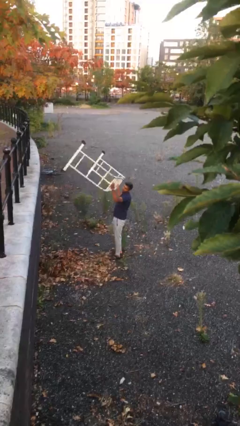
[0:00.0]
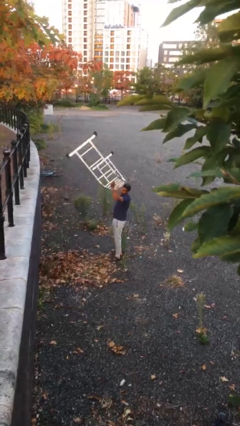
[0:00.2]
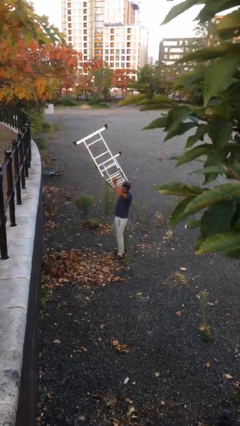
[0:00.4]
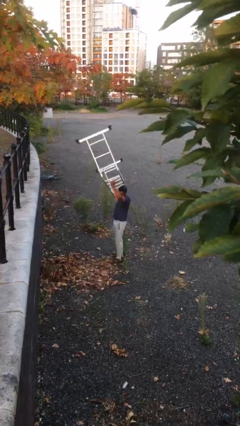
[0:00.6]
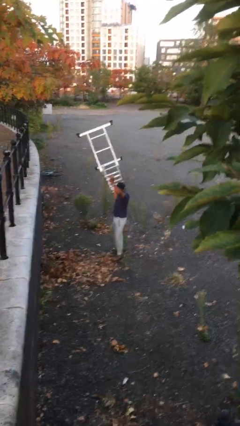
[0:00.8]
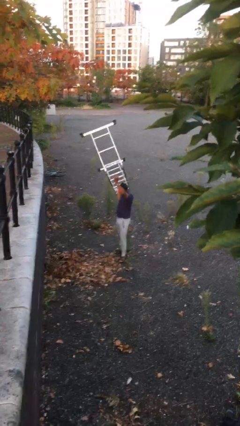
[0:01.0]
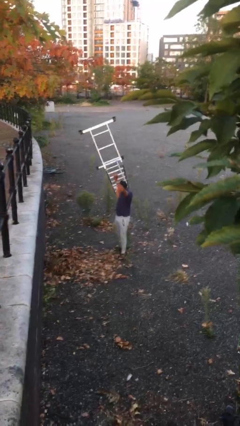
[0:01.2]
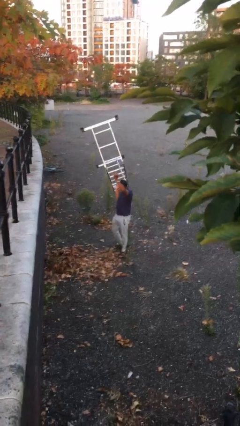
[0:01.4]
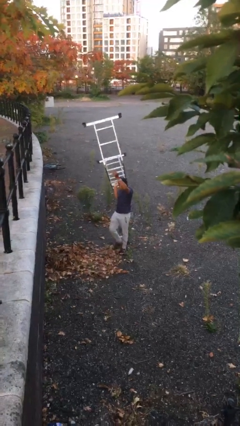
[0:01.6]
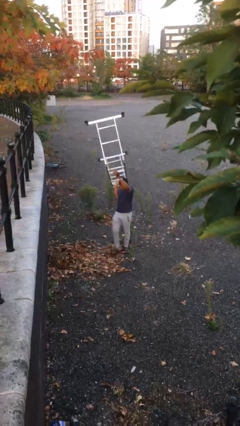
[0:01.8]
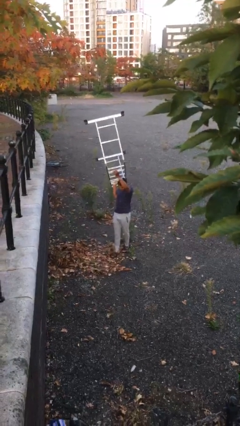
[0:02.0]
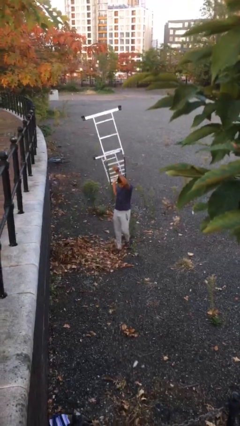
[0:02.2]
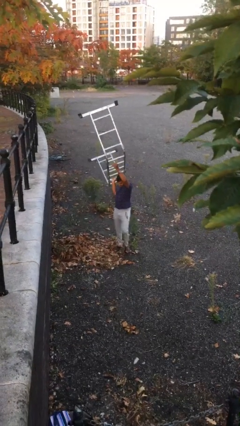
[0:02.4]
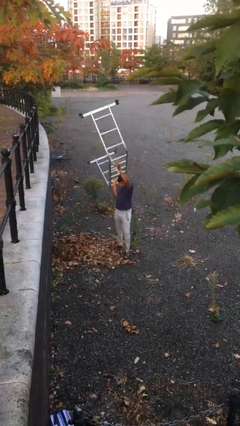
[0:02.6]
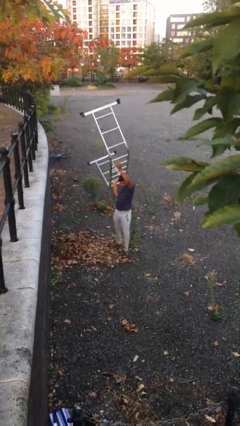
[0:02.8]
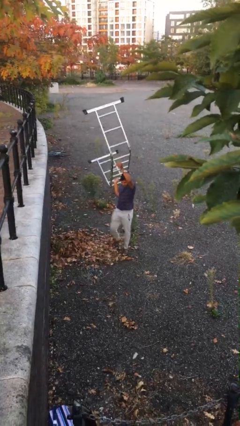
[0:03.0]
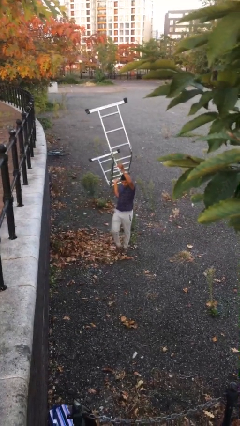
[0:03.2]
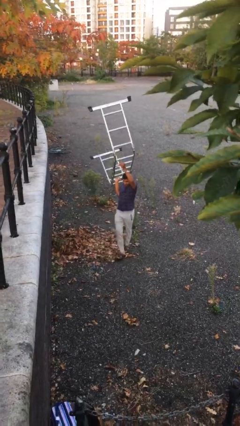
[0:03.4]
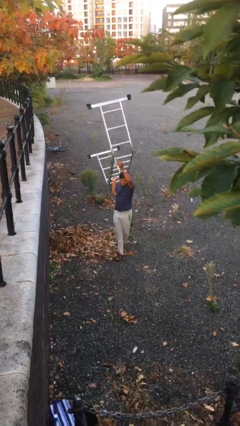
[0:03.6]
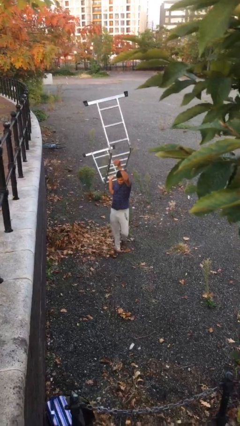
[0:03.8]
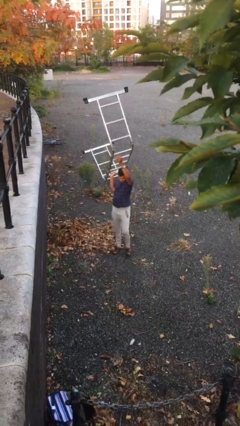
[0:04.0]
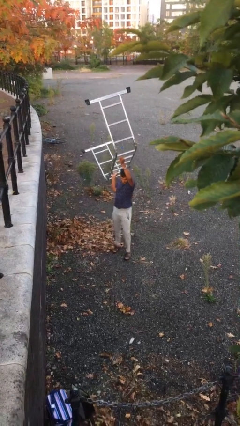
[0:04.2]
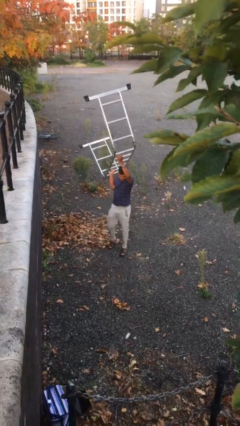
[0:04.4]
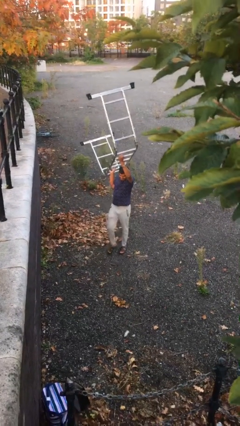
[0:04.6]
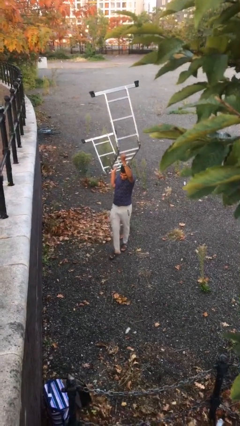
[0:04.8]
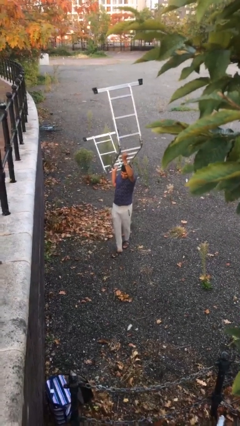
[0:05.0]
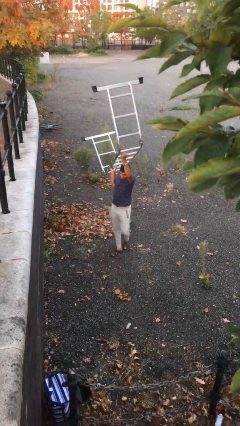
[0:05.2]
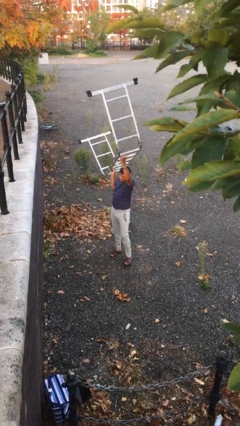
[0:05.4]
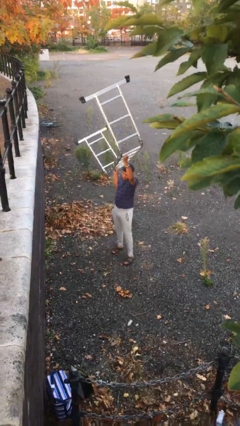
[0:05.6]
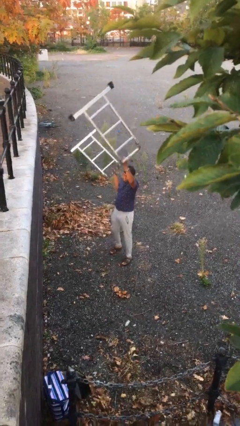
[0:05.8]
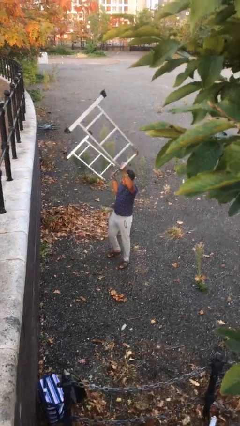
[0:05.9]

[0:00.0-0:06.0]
person carries heavy object

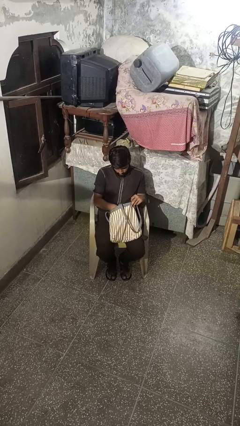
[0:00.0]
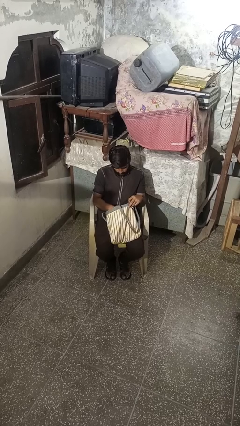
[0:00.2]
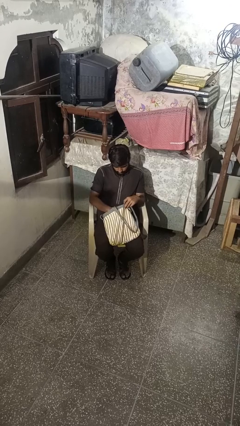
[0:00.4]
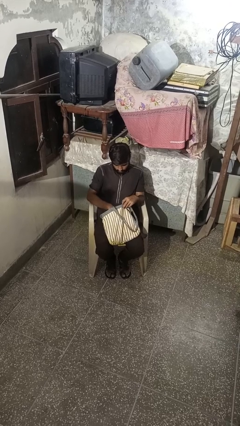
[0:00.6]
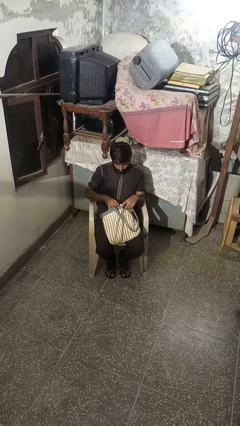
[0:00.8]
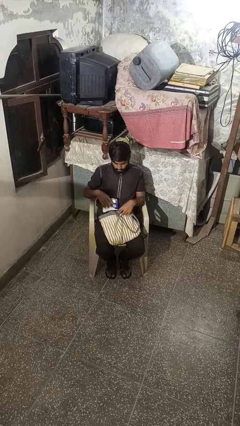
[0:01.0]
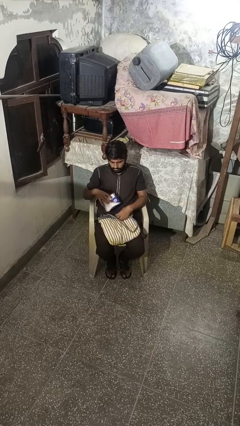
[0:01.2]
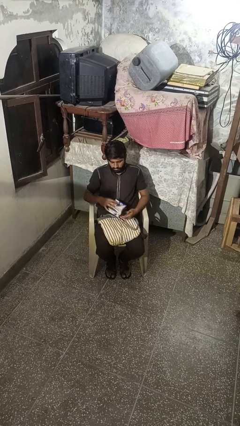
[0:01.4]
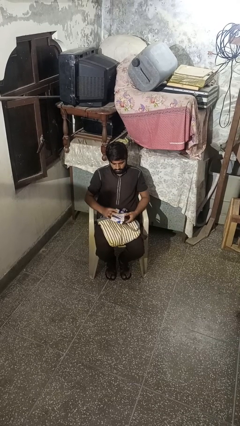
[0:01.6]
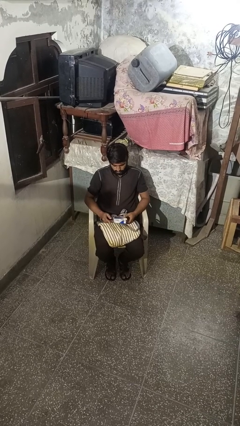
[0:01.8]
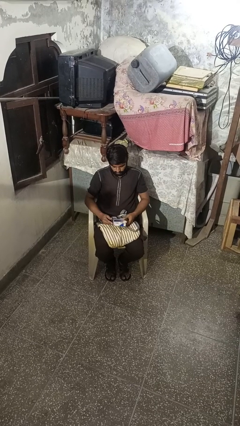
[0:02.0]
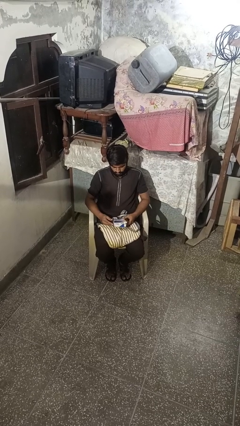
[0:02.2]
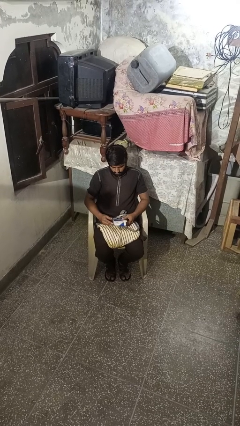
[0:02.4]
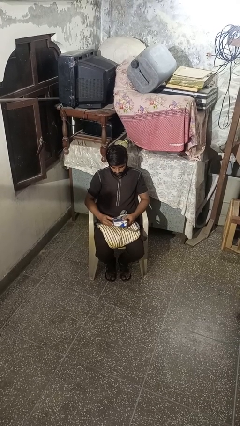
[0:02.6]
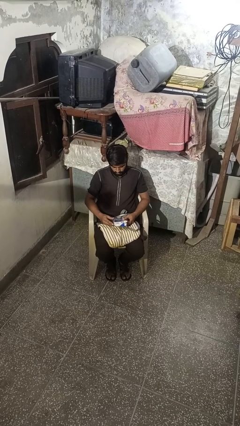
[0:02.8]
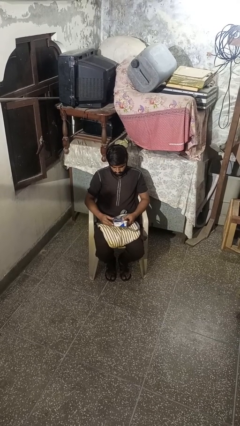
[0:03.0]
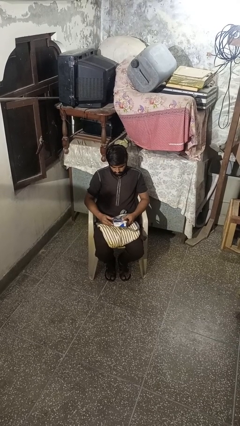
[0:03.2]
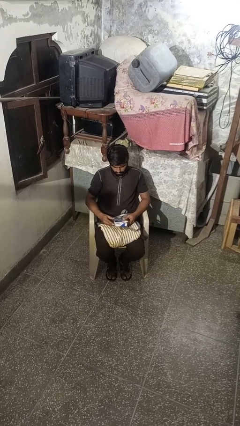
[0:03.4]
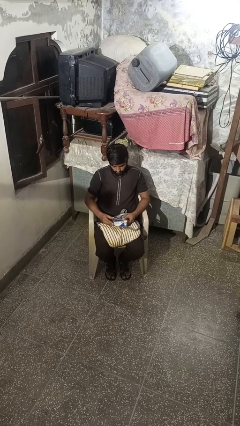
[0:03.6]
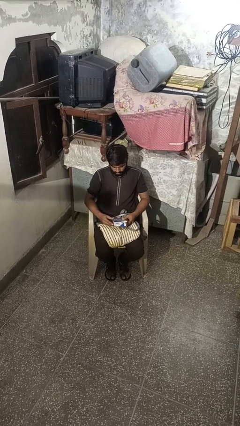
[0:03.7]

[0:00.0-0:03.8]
person takes object from backpack

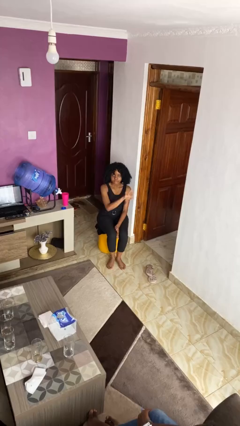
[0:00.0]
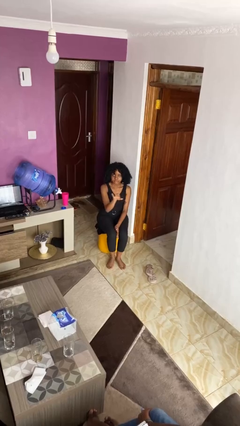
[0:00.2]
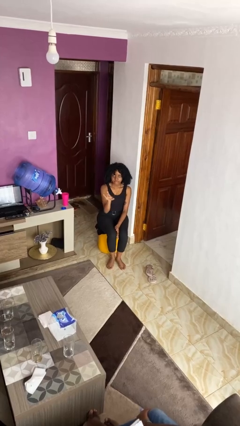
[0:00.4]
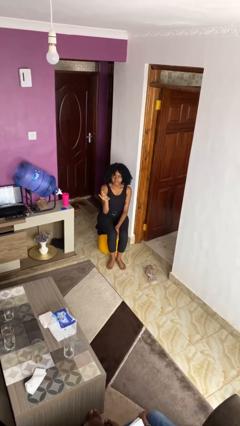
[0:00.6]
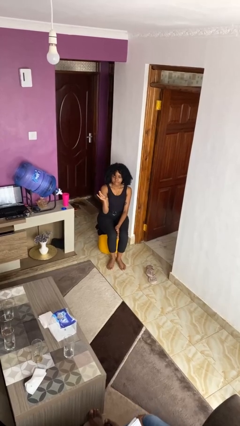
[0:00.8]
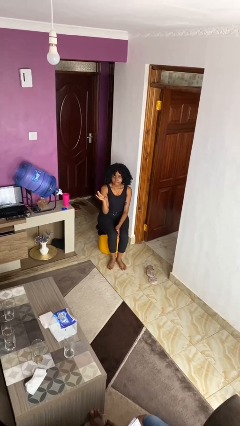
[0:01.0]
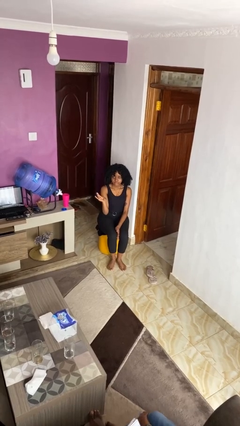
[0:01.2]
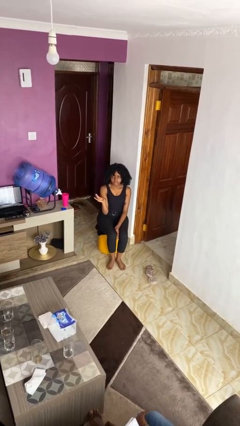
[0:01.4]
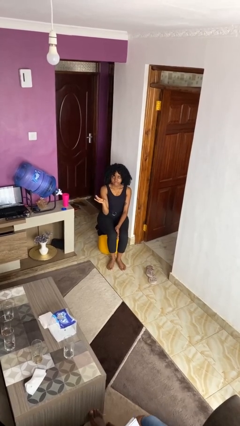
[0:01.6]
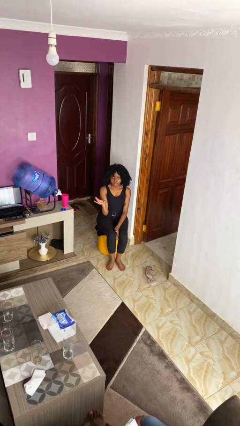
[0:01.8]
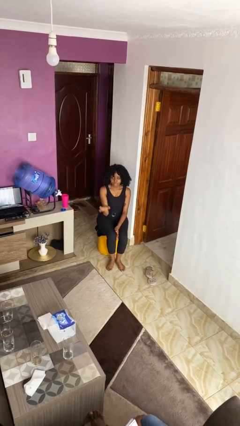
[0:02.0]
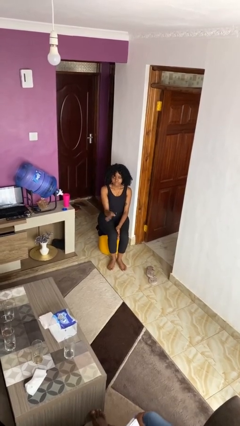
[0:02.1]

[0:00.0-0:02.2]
person gestures swipe right

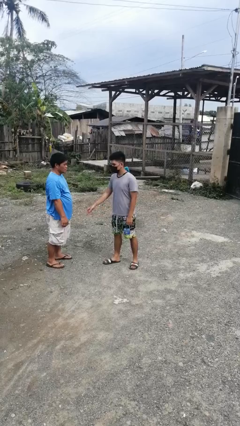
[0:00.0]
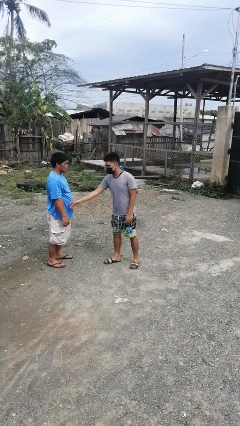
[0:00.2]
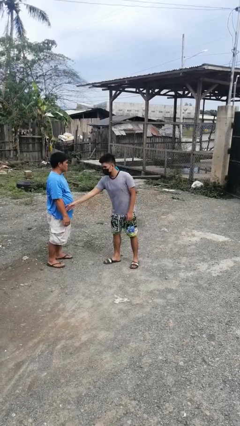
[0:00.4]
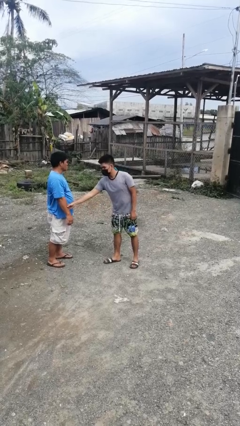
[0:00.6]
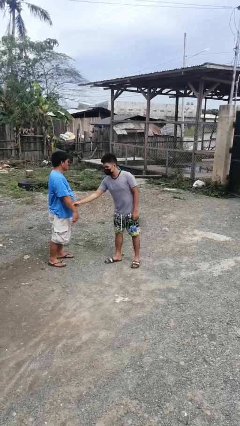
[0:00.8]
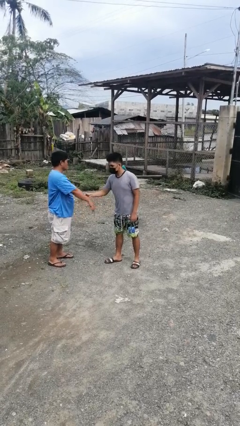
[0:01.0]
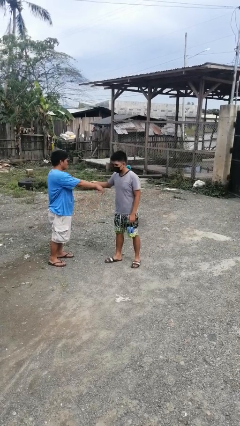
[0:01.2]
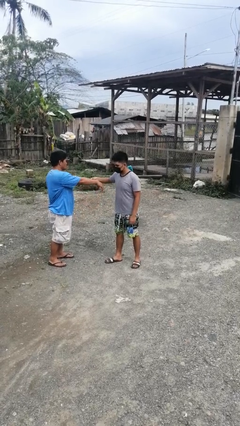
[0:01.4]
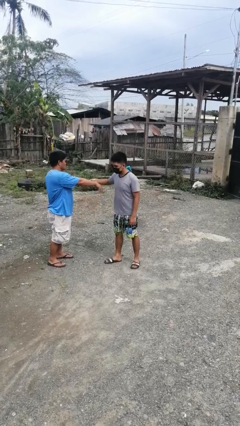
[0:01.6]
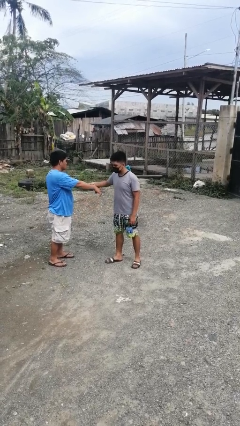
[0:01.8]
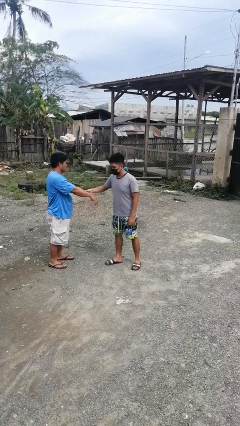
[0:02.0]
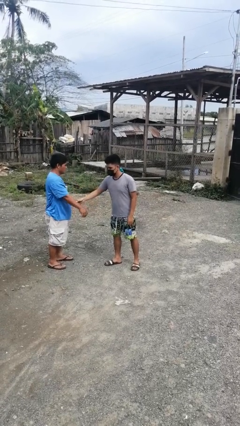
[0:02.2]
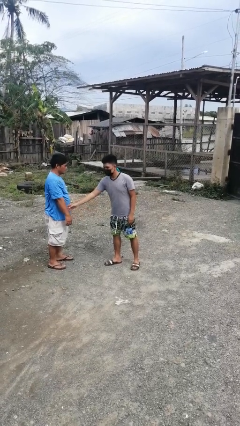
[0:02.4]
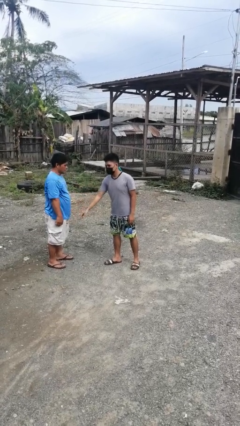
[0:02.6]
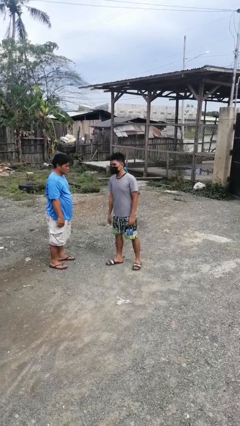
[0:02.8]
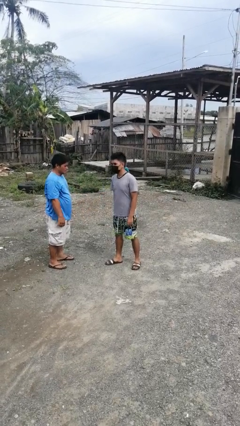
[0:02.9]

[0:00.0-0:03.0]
person grabs person by forearm

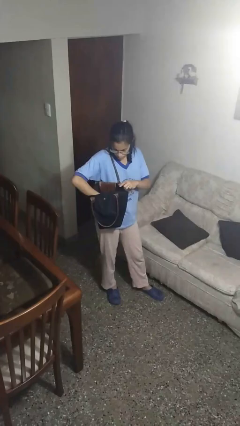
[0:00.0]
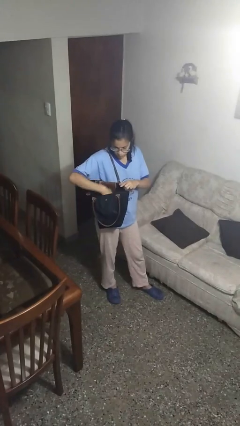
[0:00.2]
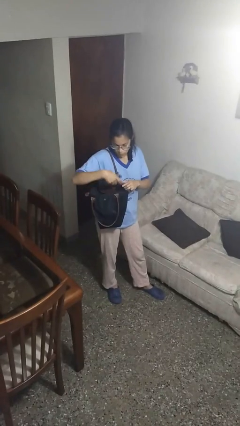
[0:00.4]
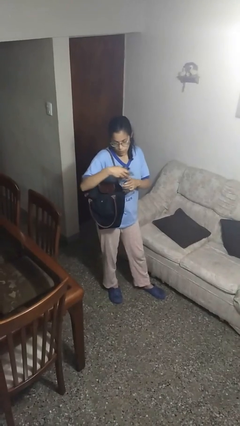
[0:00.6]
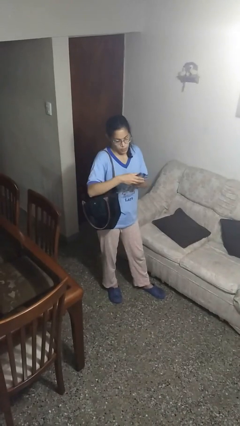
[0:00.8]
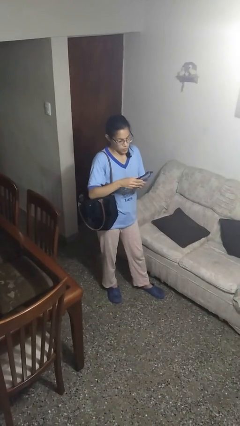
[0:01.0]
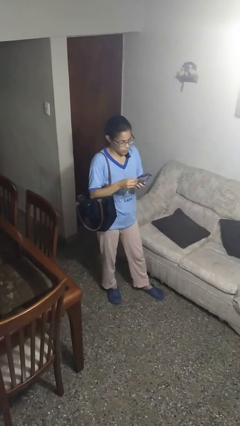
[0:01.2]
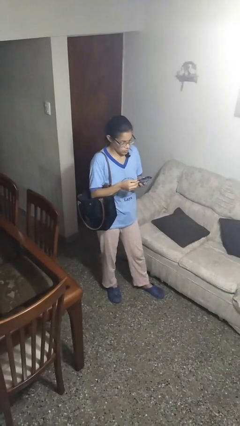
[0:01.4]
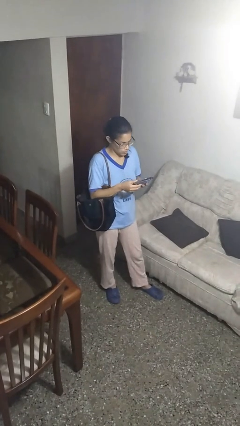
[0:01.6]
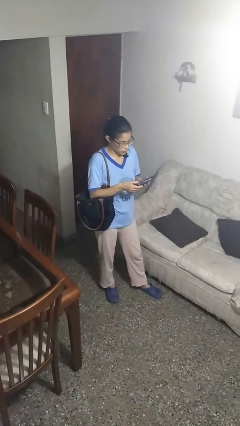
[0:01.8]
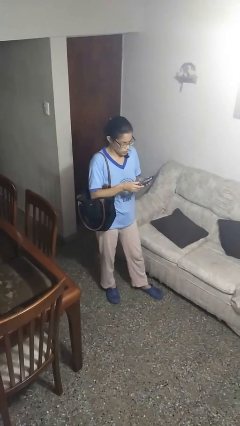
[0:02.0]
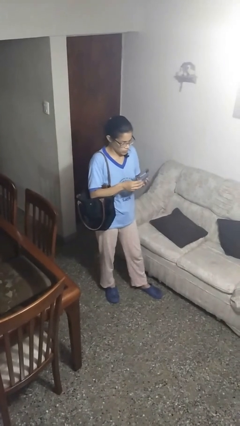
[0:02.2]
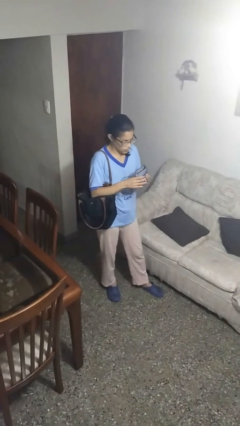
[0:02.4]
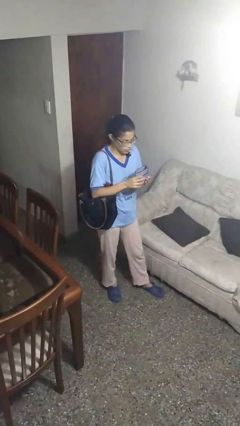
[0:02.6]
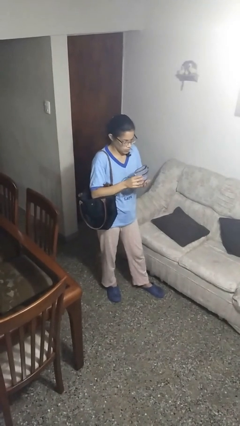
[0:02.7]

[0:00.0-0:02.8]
person takes object from purse
